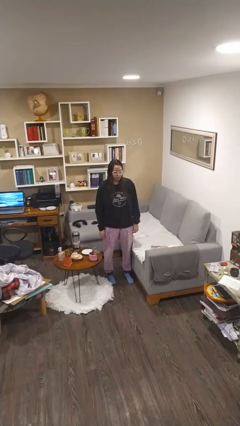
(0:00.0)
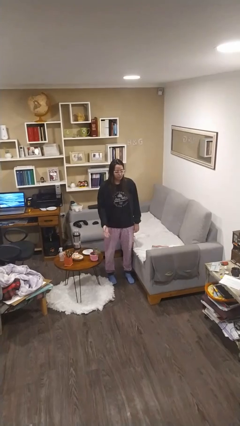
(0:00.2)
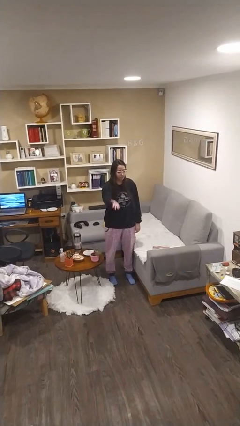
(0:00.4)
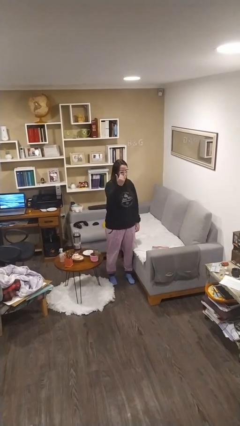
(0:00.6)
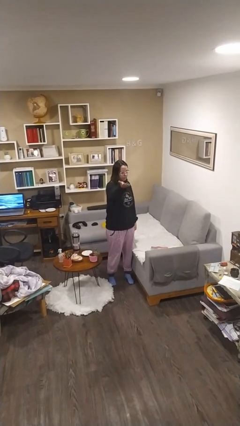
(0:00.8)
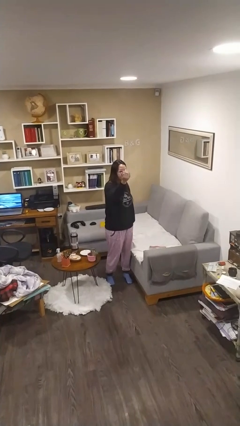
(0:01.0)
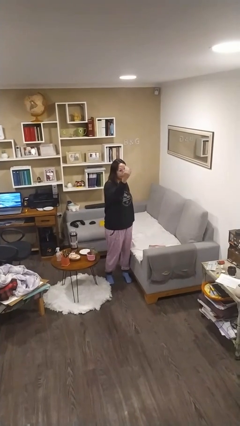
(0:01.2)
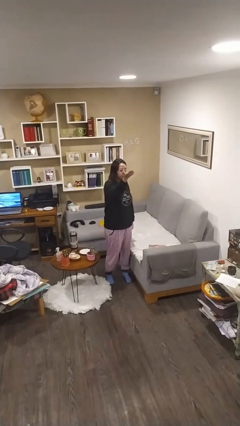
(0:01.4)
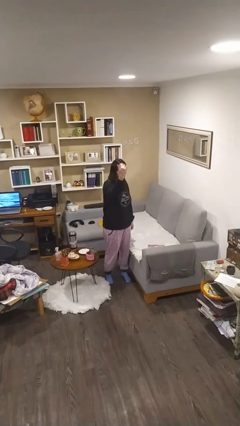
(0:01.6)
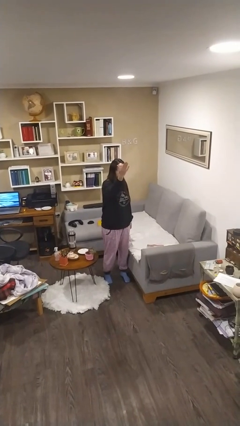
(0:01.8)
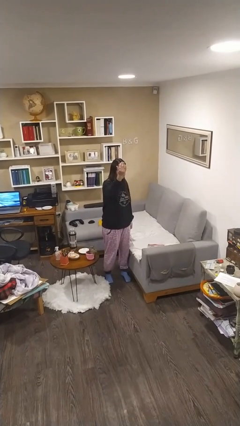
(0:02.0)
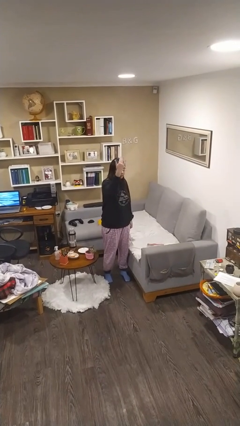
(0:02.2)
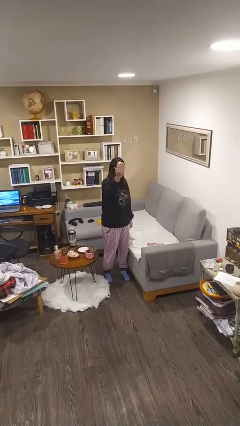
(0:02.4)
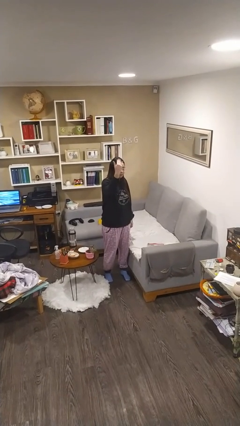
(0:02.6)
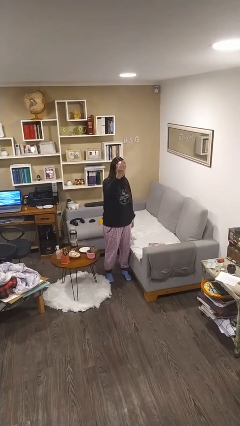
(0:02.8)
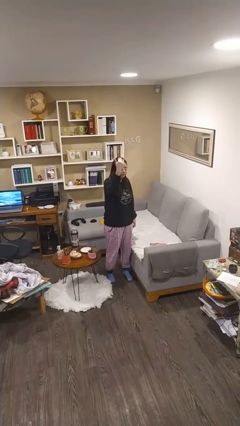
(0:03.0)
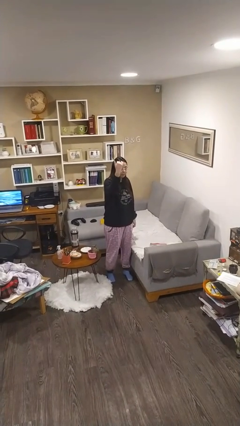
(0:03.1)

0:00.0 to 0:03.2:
person gestures come here

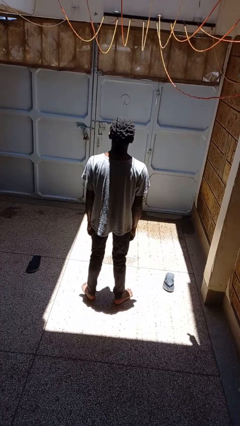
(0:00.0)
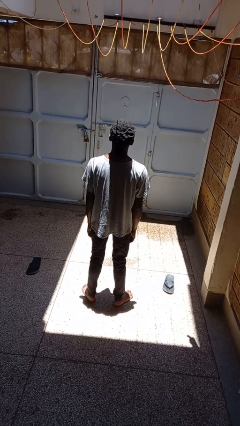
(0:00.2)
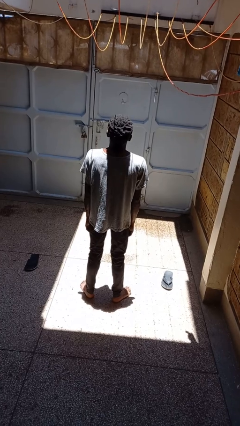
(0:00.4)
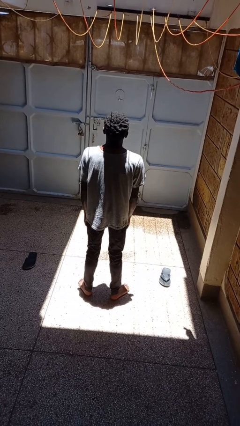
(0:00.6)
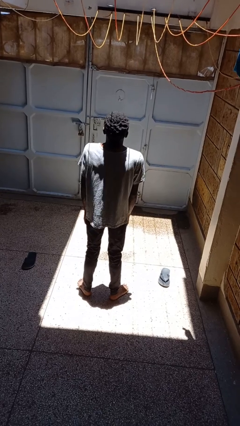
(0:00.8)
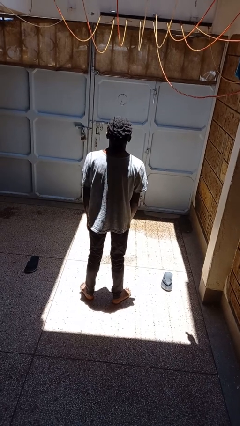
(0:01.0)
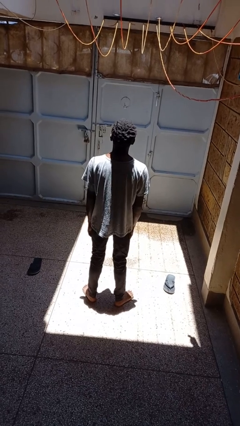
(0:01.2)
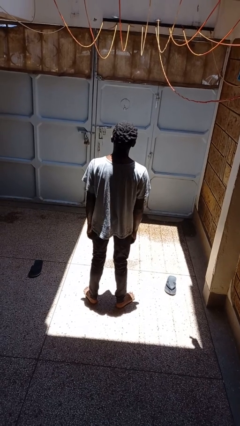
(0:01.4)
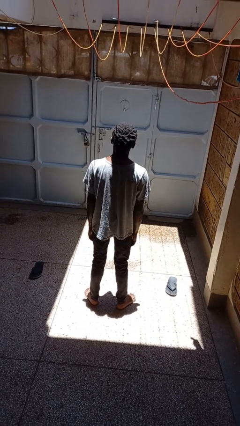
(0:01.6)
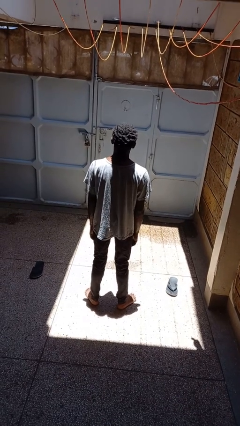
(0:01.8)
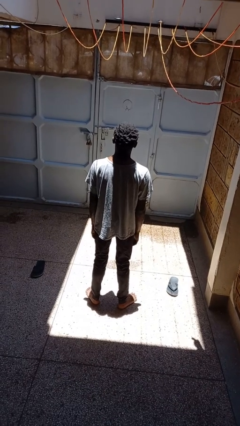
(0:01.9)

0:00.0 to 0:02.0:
person shrugs

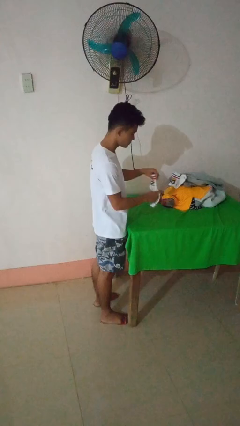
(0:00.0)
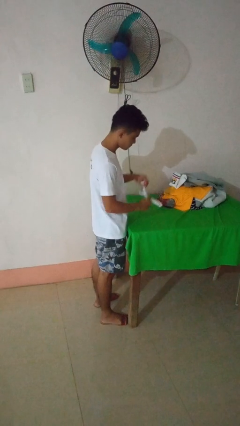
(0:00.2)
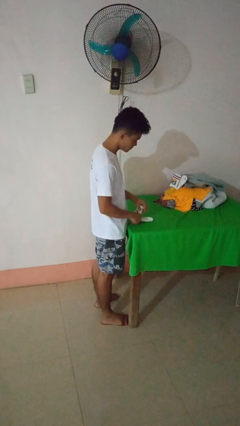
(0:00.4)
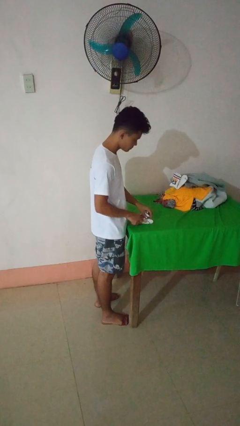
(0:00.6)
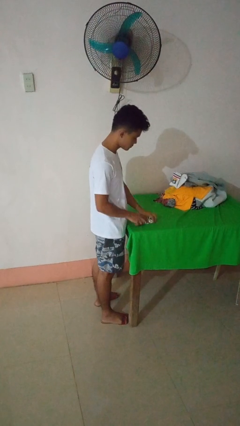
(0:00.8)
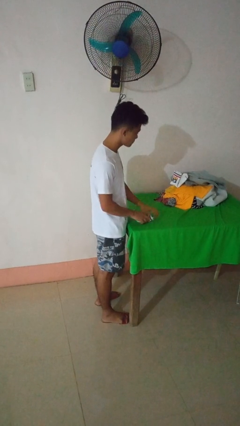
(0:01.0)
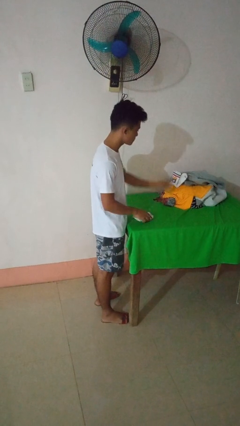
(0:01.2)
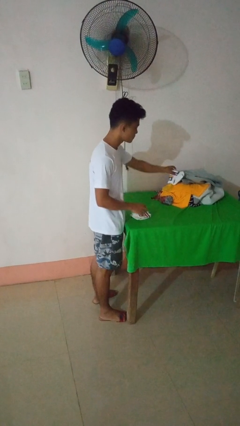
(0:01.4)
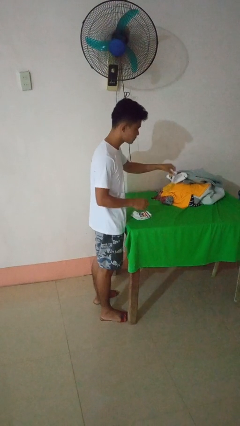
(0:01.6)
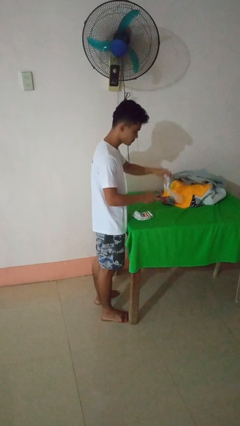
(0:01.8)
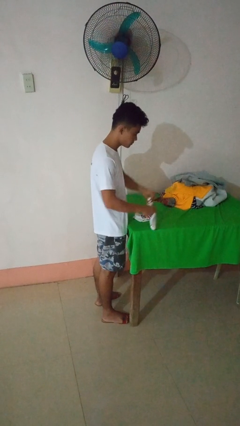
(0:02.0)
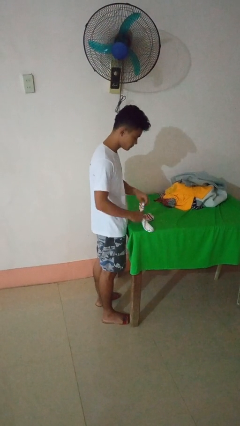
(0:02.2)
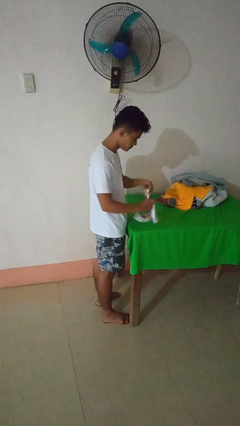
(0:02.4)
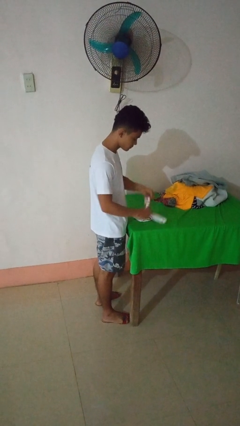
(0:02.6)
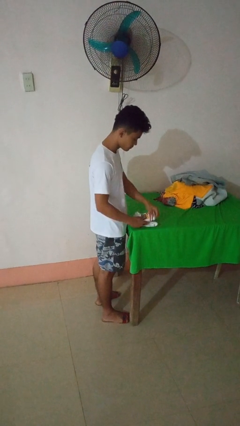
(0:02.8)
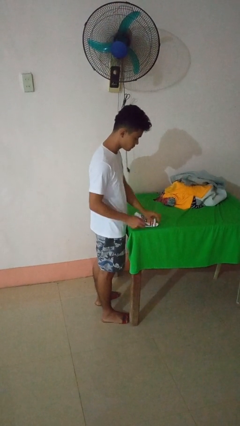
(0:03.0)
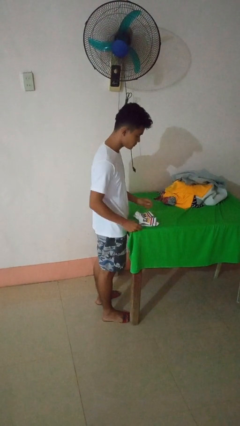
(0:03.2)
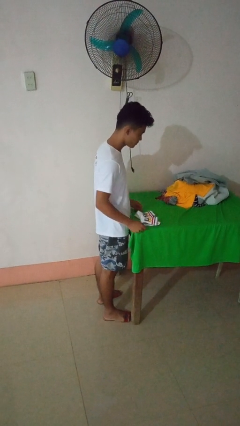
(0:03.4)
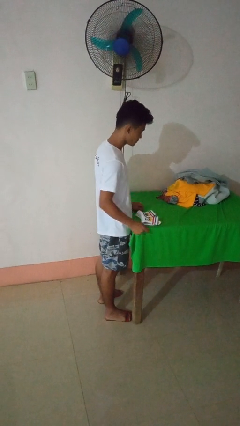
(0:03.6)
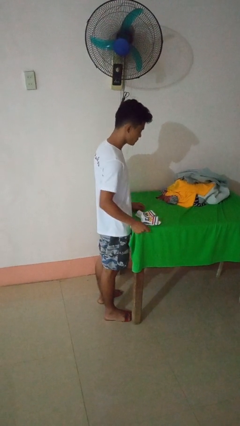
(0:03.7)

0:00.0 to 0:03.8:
person folds socks

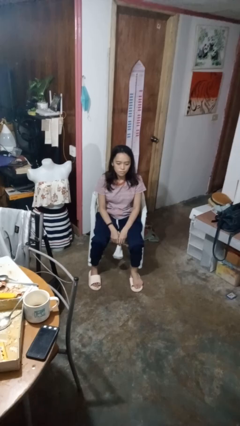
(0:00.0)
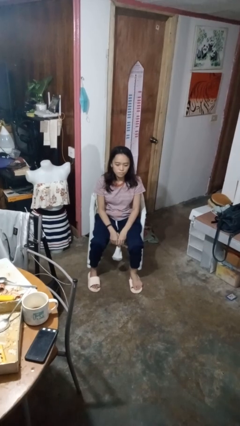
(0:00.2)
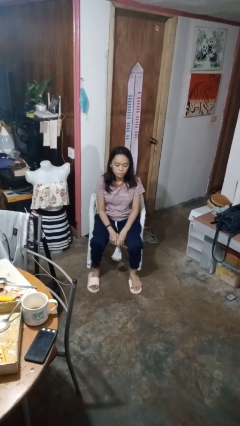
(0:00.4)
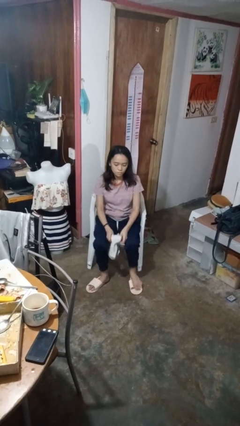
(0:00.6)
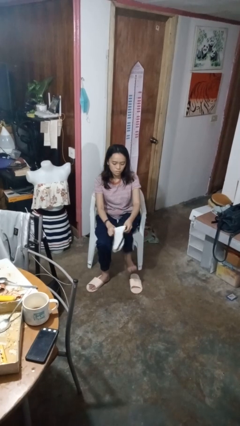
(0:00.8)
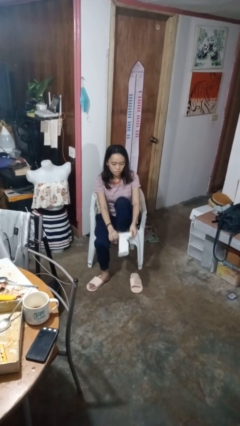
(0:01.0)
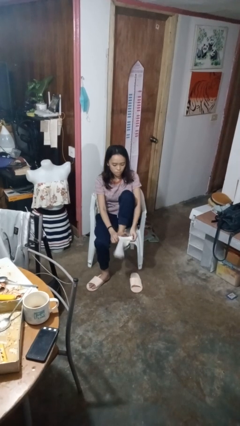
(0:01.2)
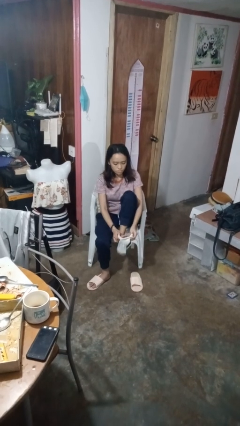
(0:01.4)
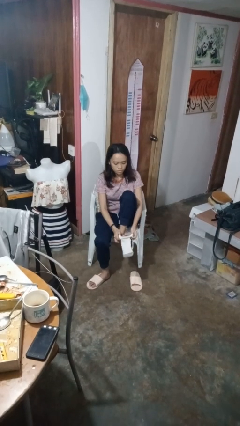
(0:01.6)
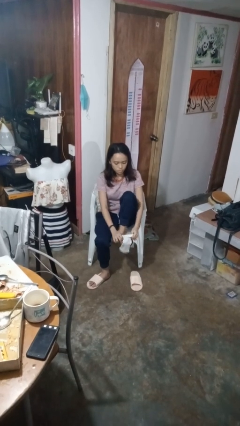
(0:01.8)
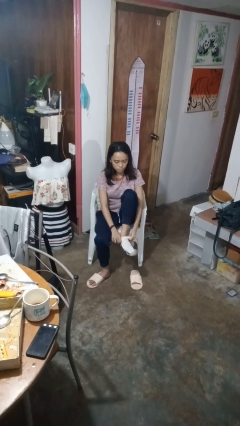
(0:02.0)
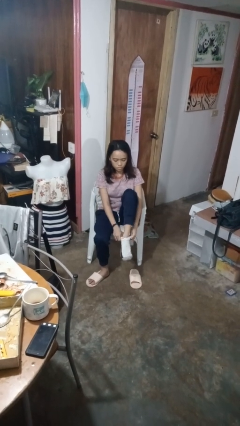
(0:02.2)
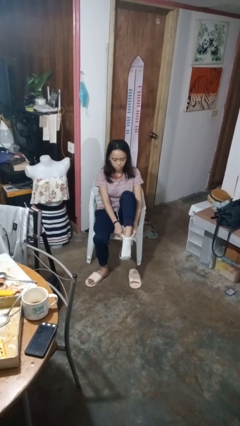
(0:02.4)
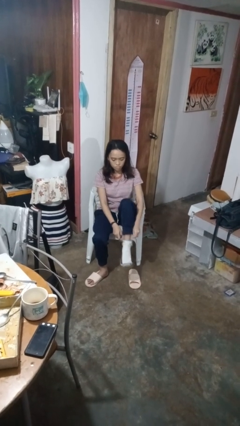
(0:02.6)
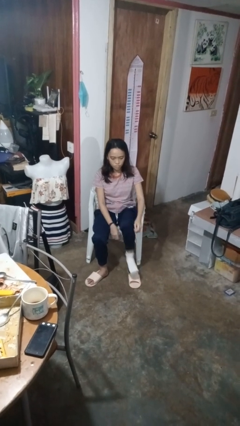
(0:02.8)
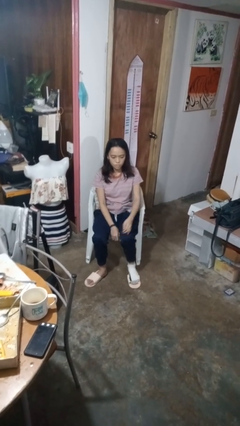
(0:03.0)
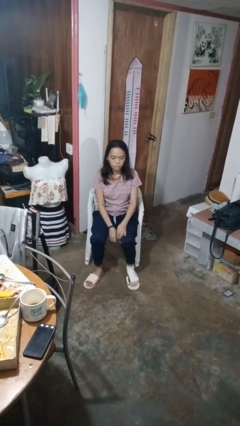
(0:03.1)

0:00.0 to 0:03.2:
person puts on socks

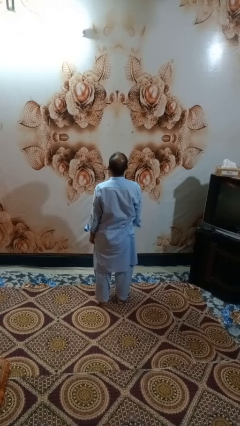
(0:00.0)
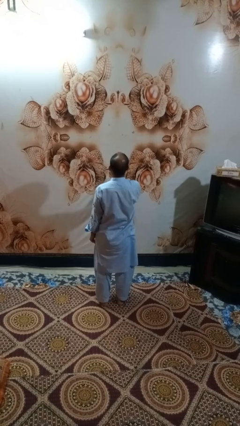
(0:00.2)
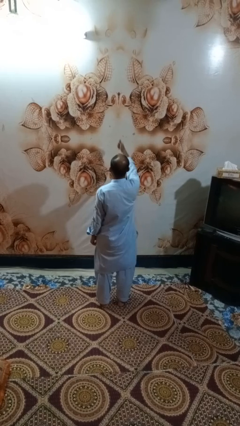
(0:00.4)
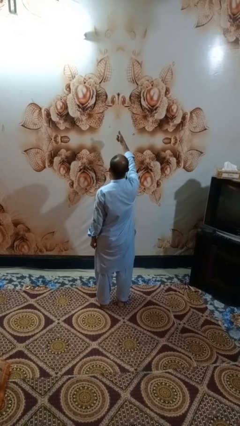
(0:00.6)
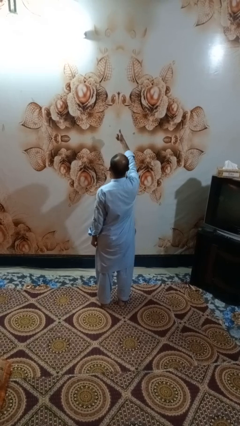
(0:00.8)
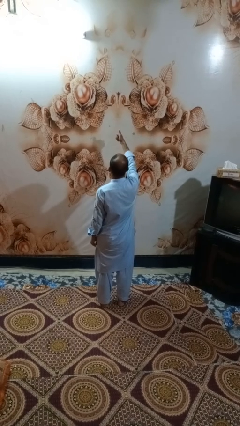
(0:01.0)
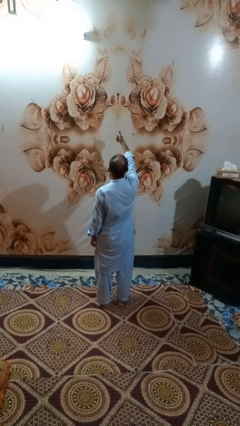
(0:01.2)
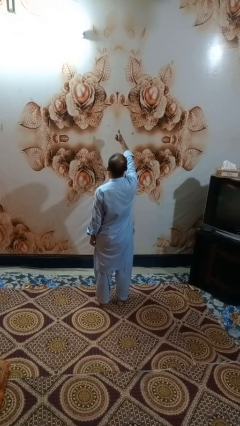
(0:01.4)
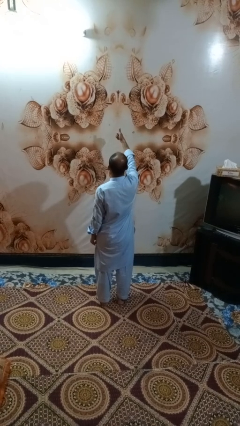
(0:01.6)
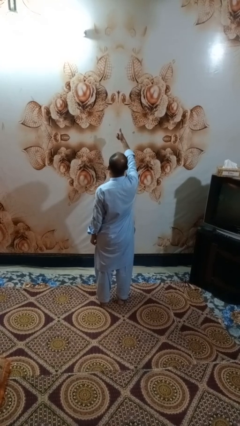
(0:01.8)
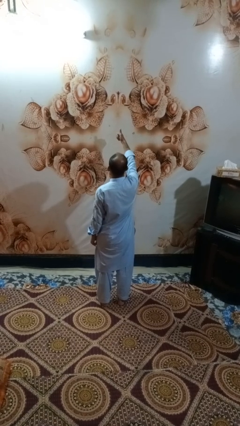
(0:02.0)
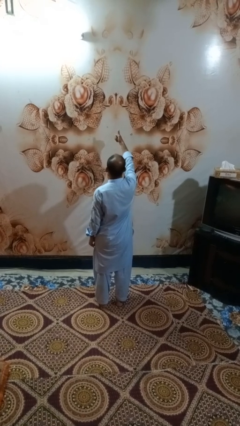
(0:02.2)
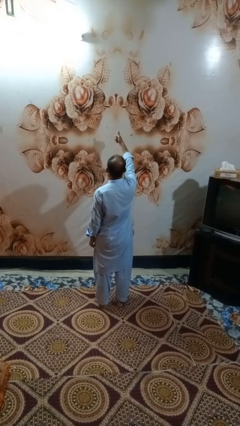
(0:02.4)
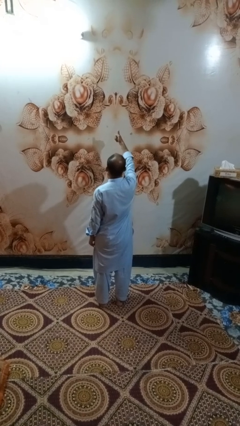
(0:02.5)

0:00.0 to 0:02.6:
person gestures thumbs up

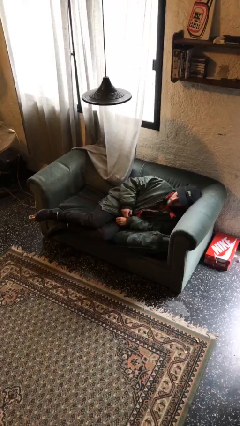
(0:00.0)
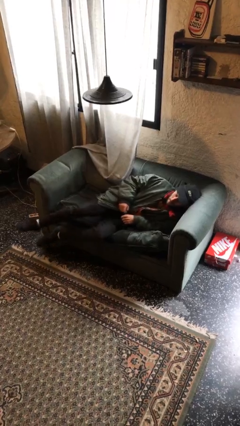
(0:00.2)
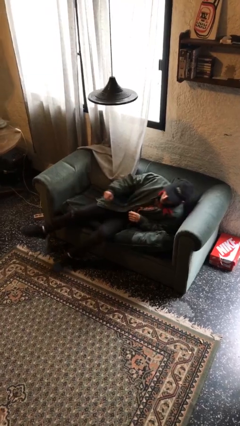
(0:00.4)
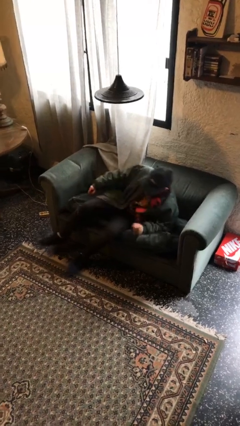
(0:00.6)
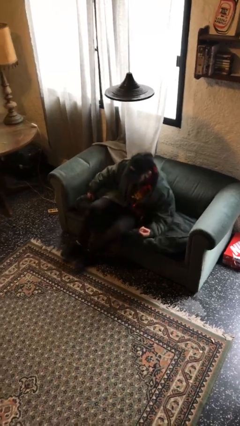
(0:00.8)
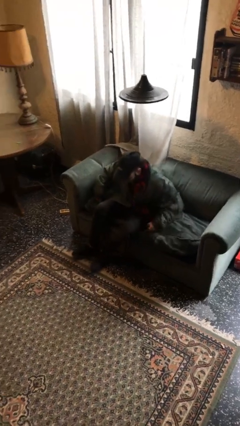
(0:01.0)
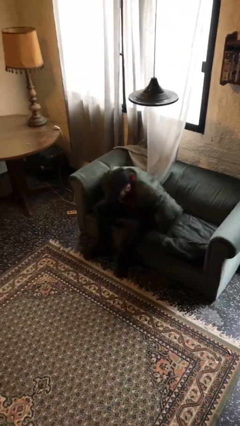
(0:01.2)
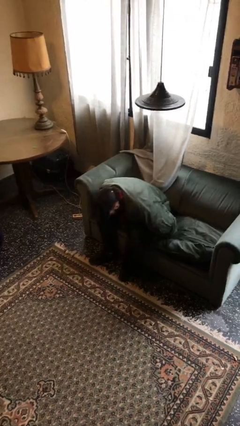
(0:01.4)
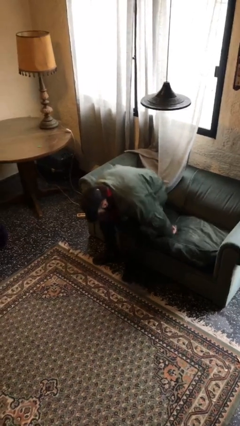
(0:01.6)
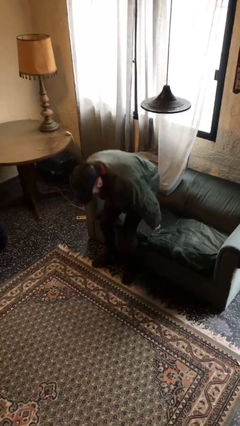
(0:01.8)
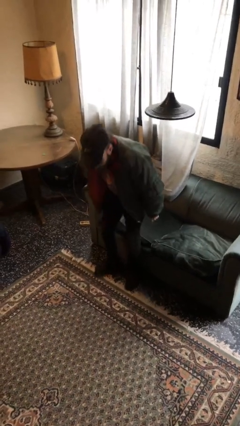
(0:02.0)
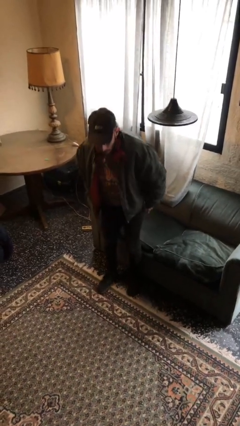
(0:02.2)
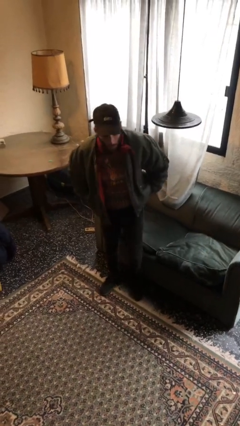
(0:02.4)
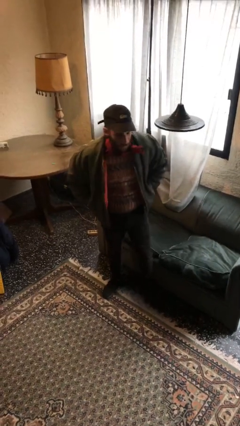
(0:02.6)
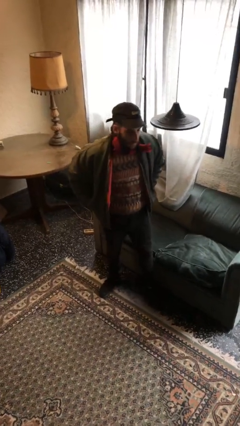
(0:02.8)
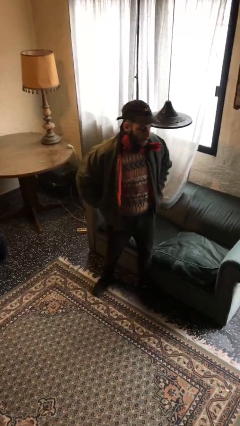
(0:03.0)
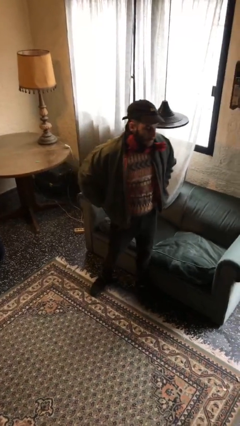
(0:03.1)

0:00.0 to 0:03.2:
person stands up
